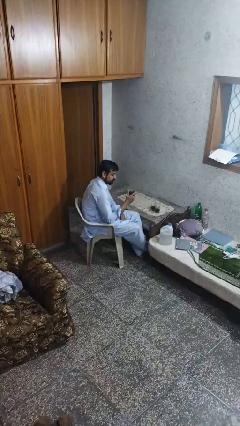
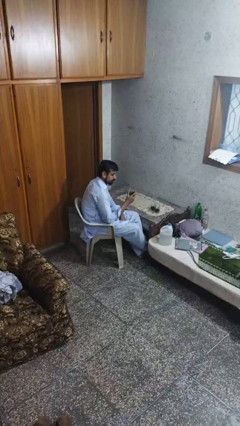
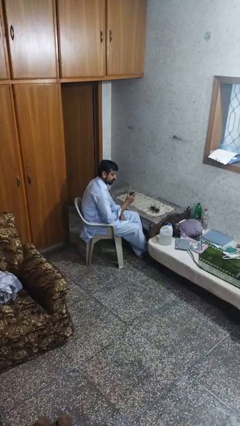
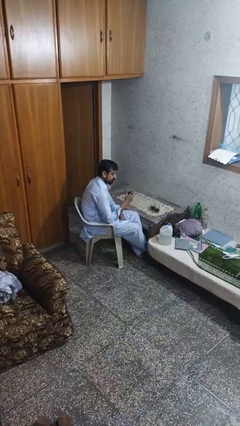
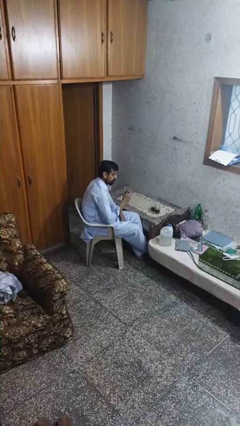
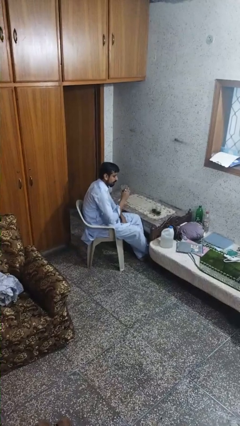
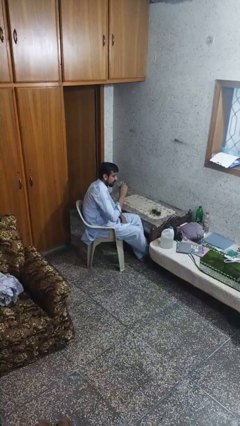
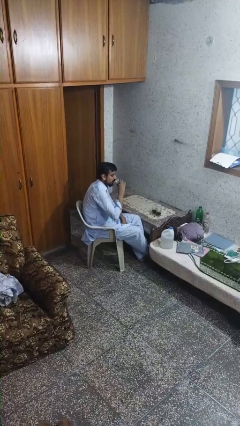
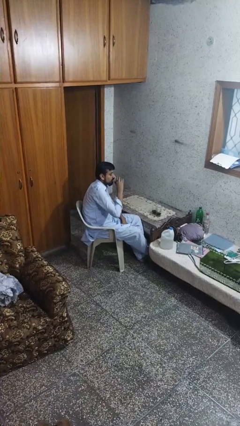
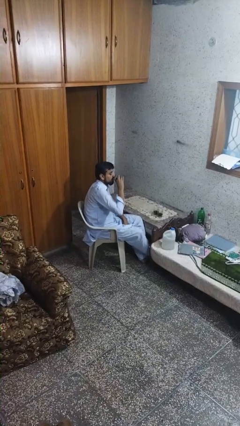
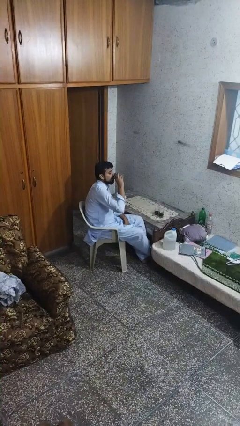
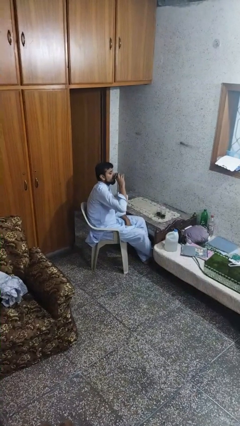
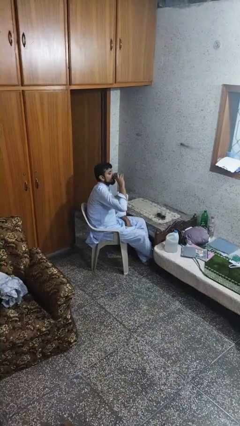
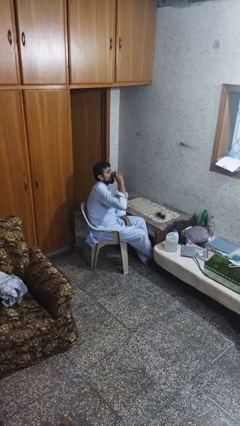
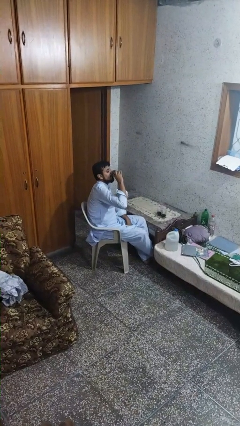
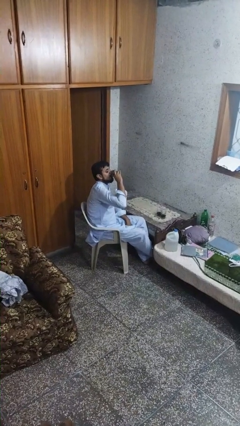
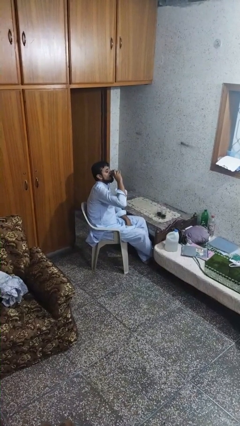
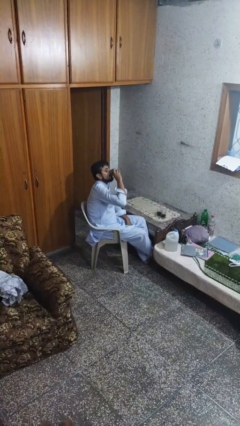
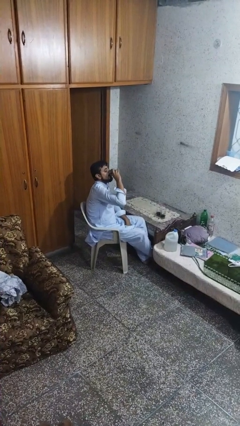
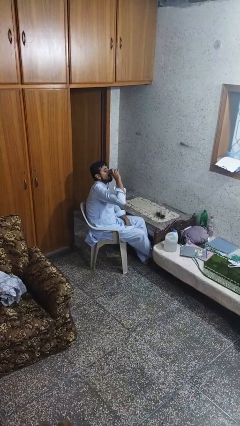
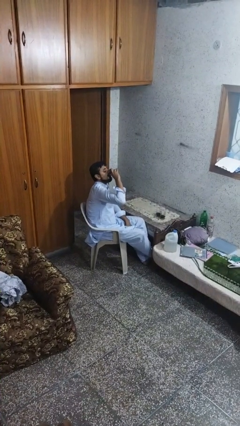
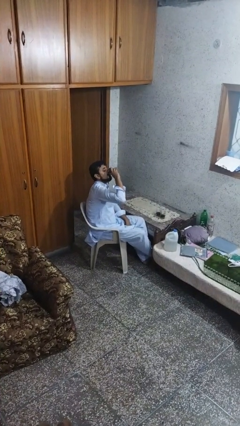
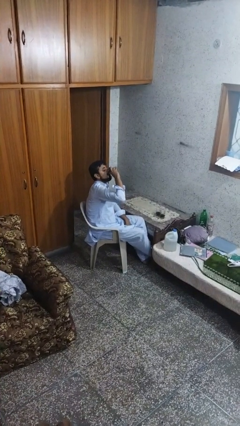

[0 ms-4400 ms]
person drinks from shotglass

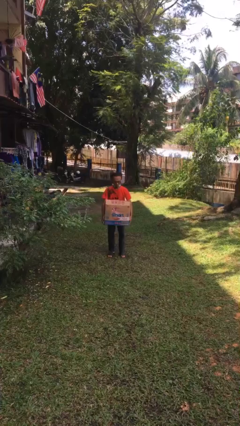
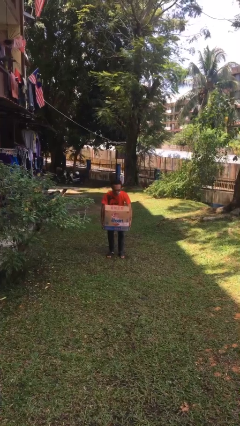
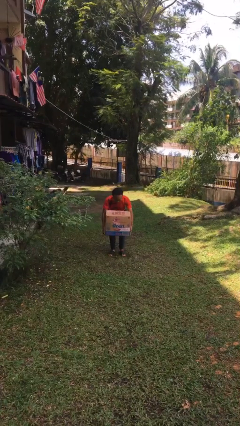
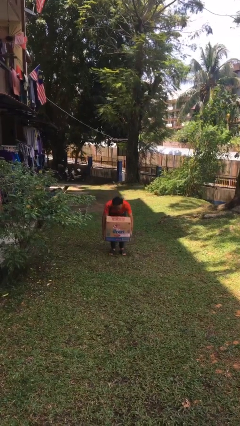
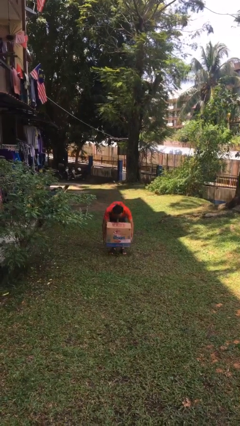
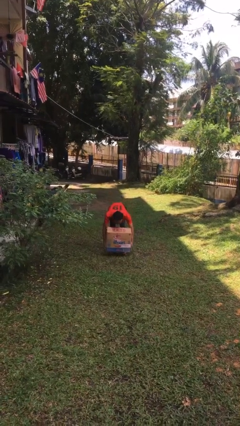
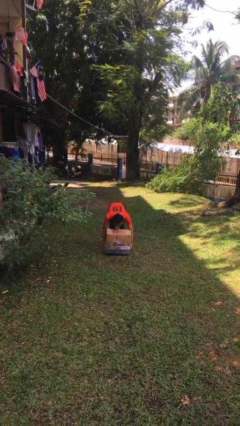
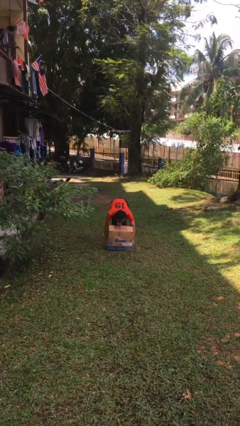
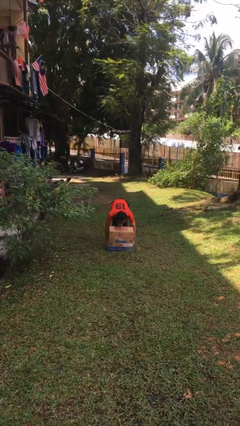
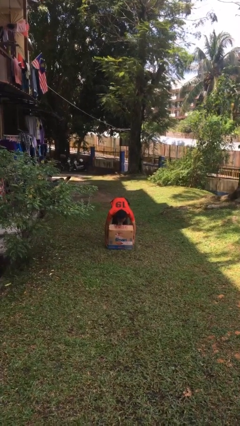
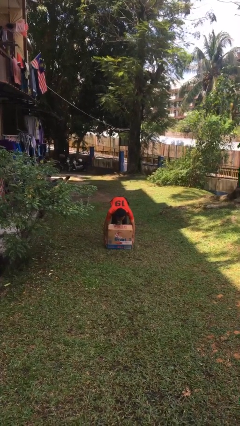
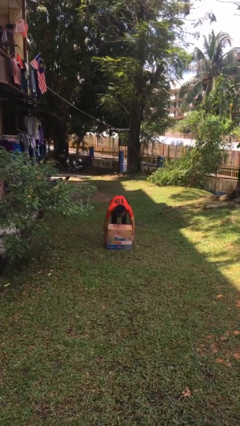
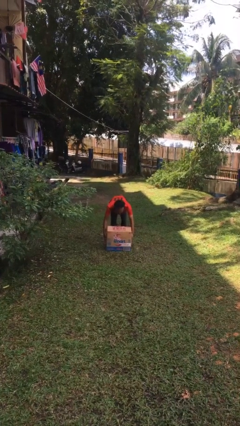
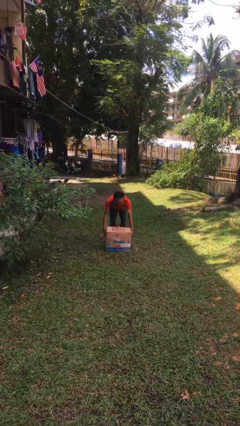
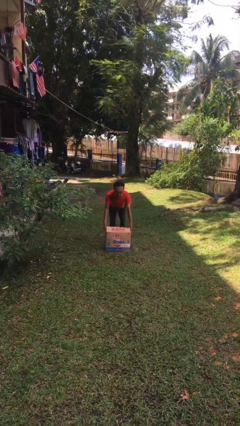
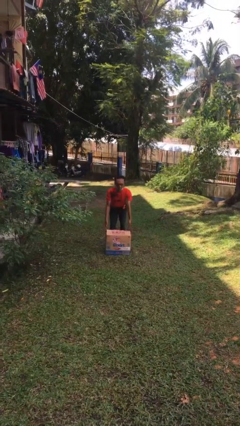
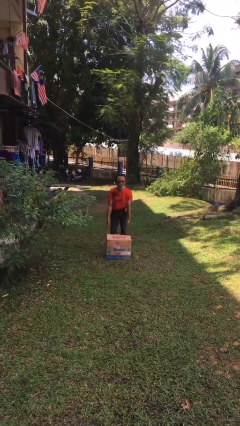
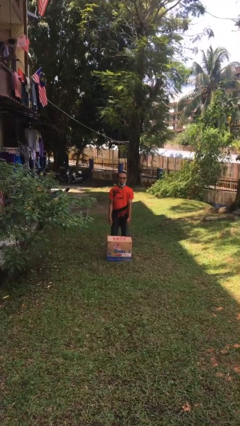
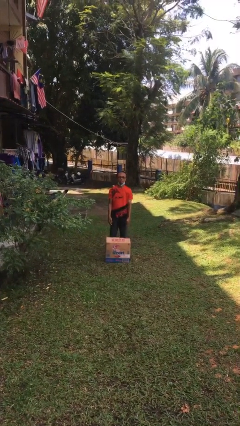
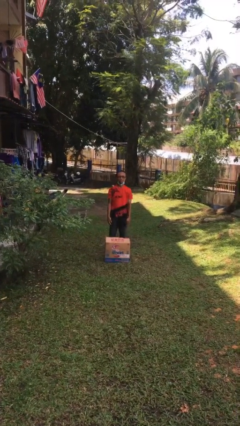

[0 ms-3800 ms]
person puts down object on floor

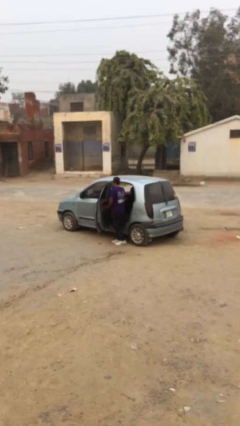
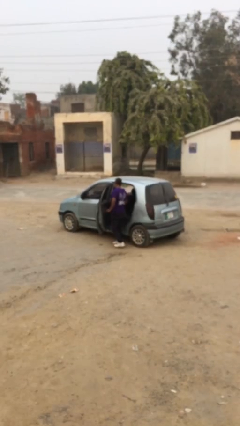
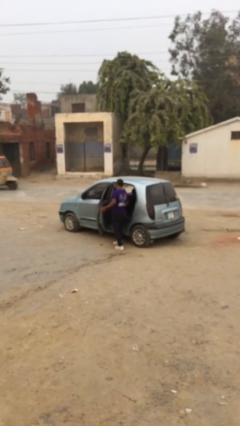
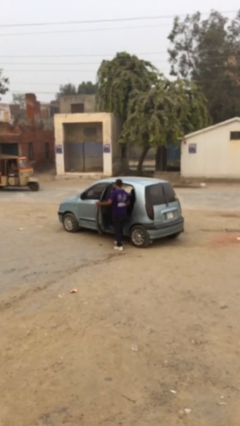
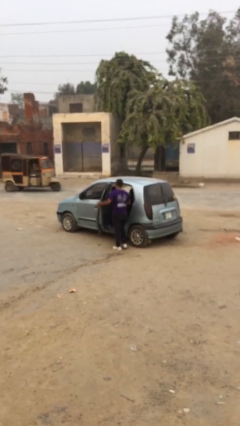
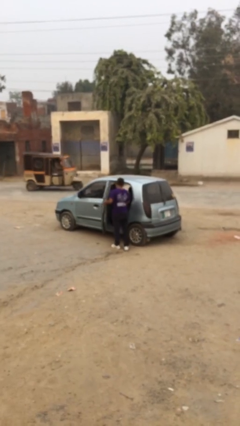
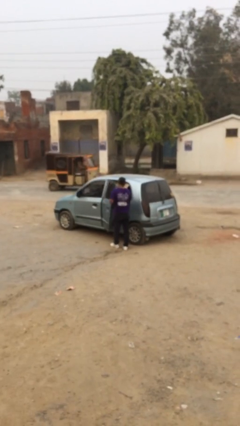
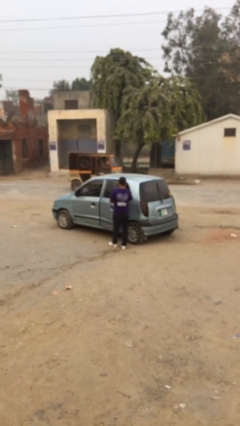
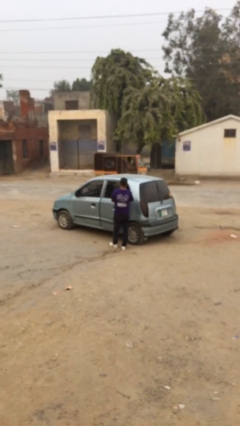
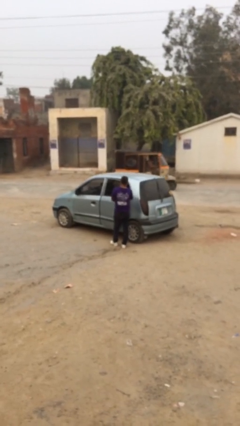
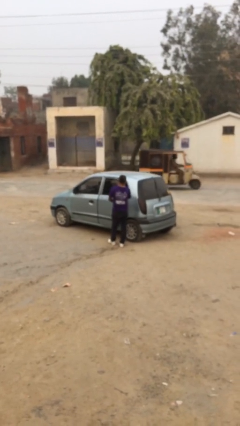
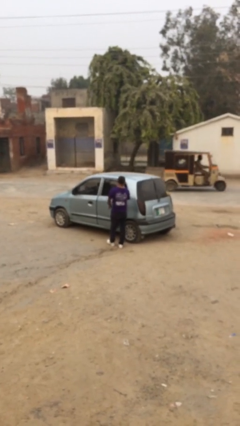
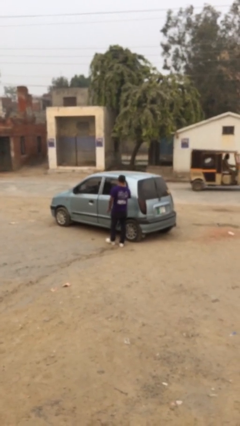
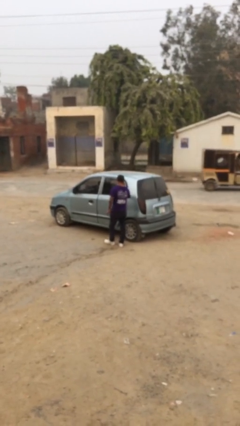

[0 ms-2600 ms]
person closes car door

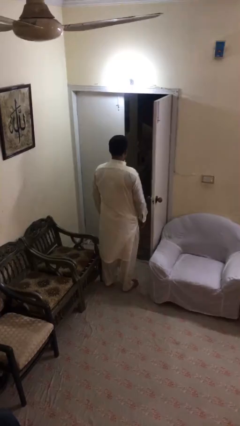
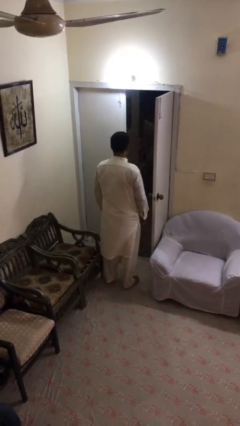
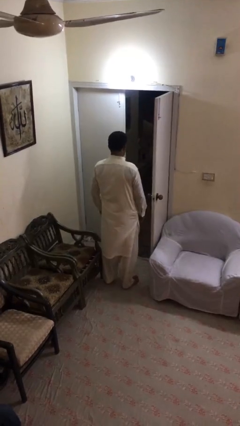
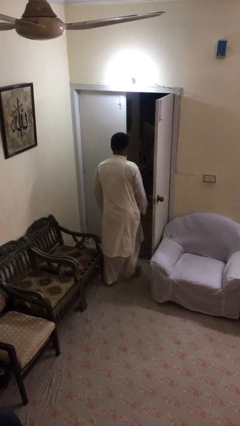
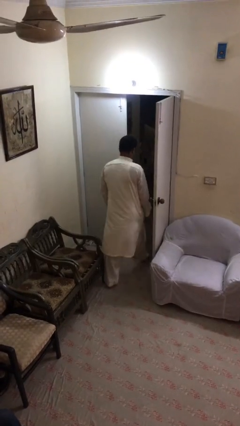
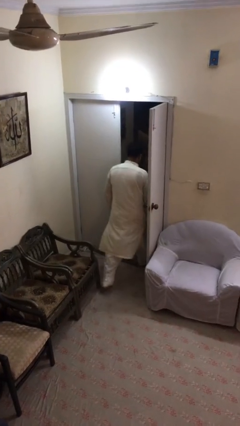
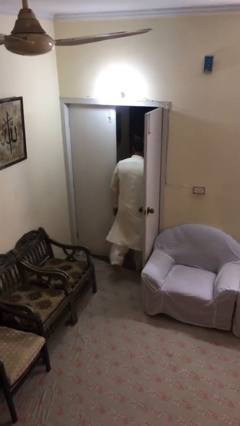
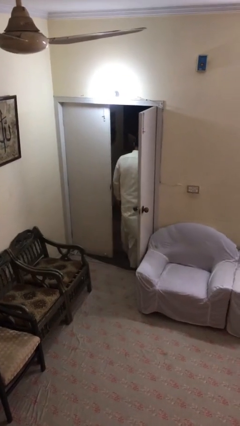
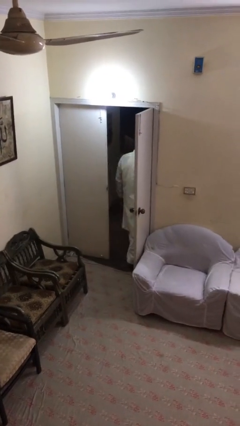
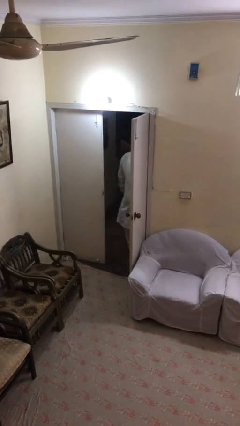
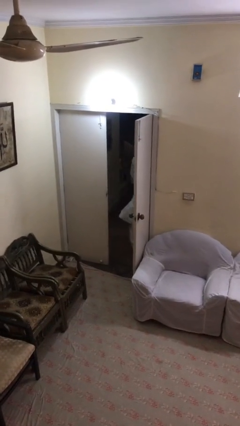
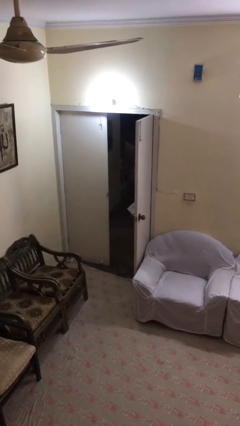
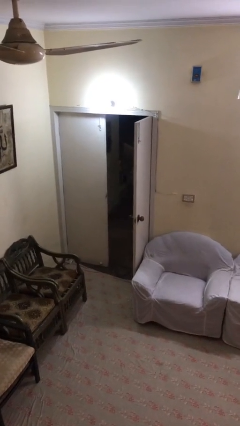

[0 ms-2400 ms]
person exits scene through structure

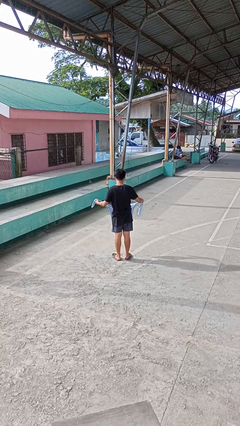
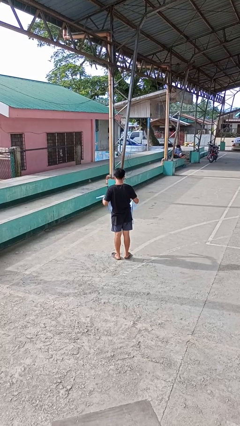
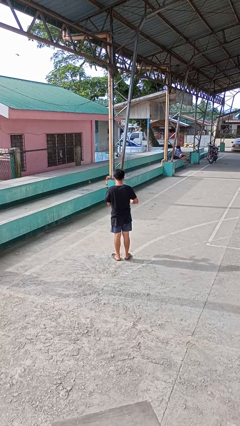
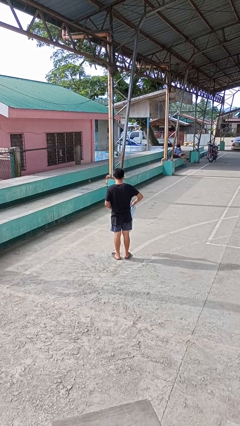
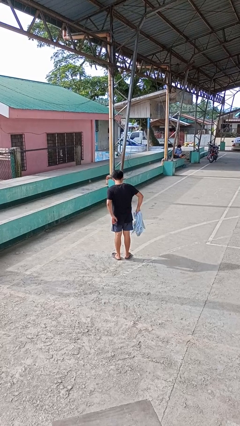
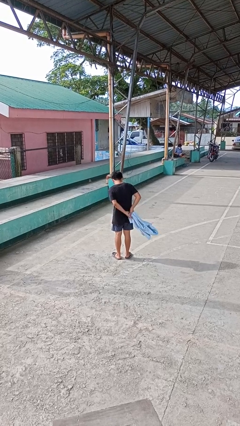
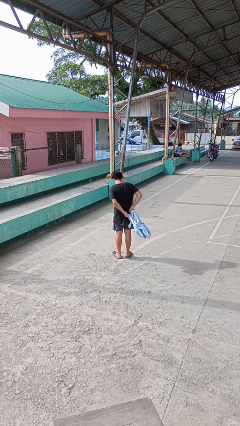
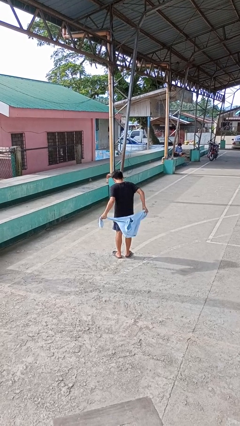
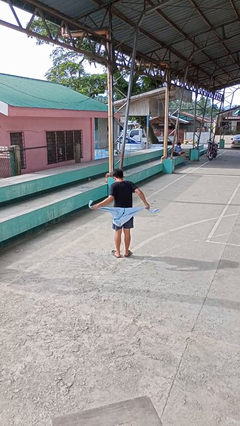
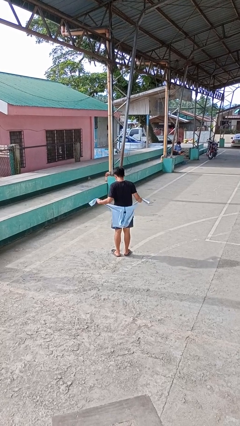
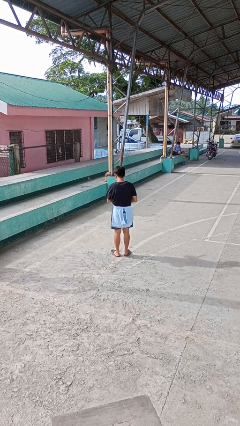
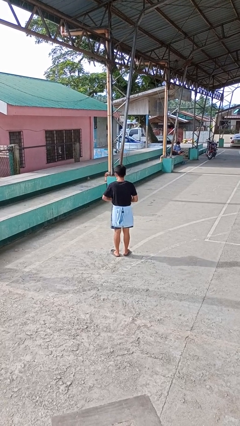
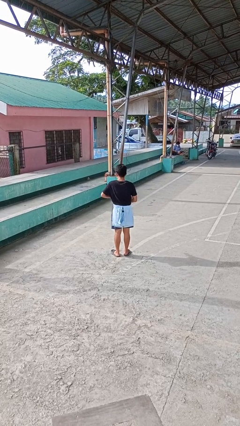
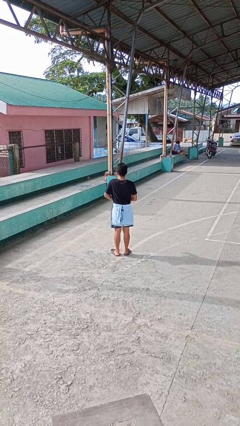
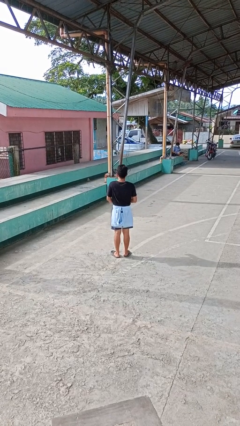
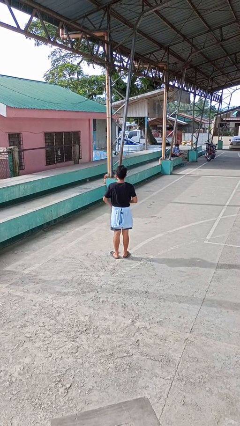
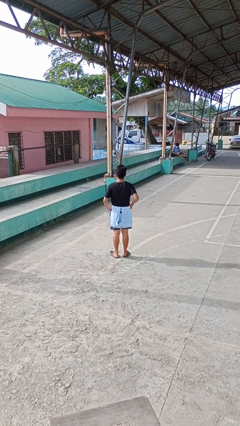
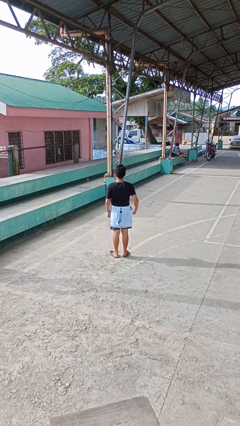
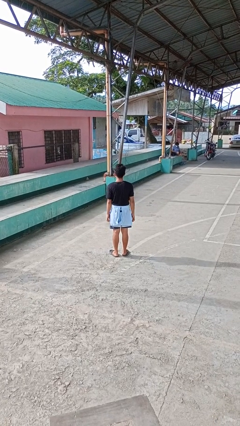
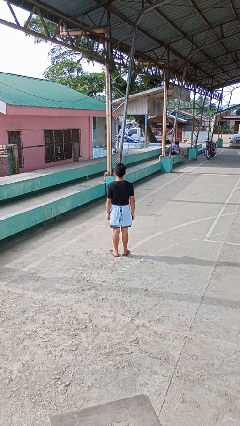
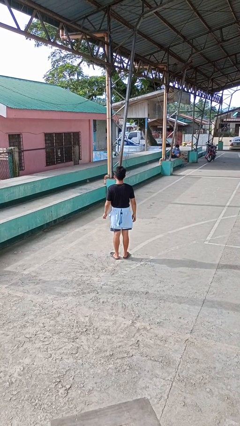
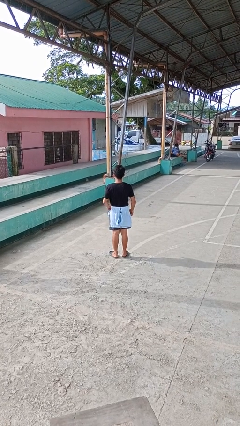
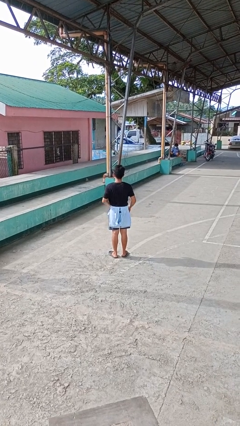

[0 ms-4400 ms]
person ties jacket around waist

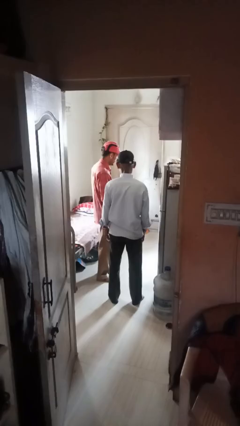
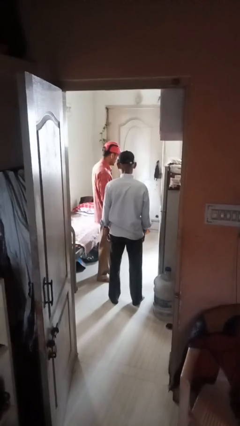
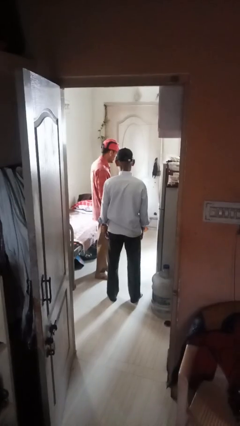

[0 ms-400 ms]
person shoves person
